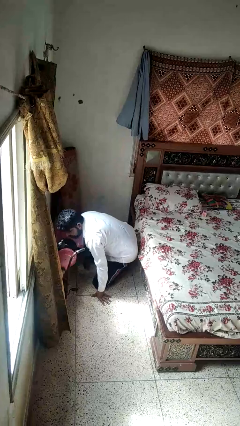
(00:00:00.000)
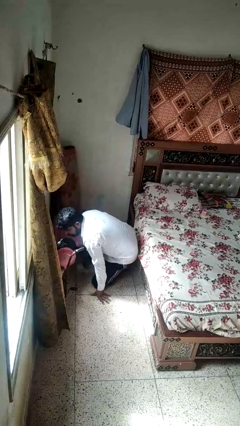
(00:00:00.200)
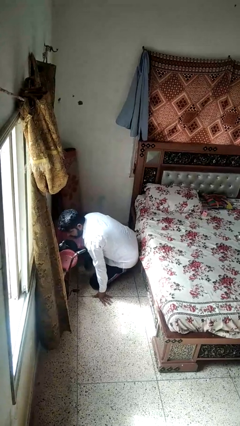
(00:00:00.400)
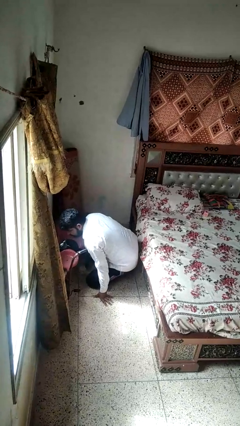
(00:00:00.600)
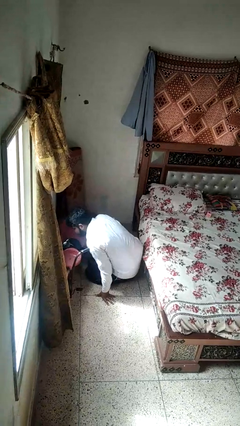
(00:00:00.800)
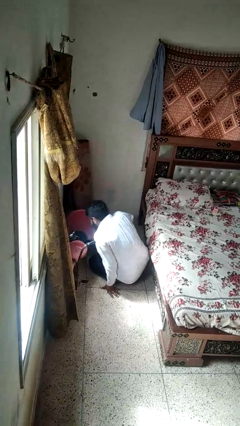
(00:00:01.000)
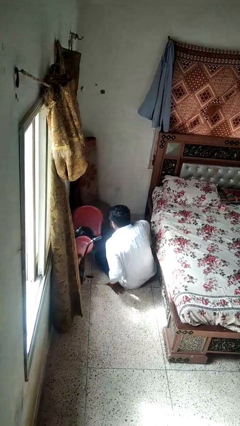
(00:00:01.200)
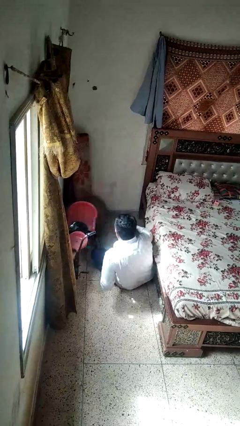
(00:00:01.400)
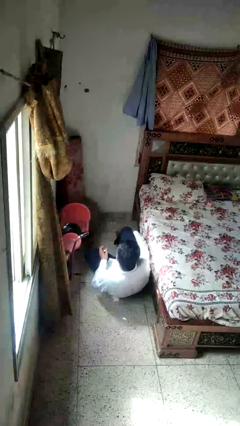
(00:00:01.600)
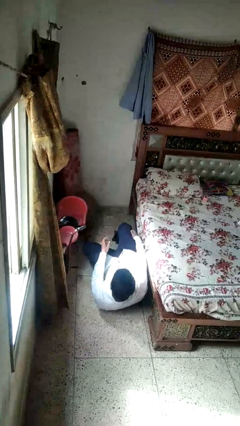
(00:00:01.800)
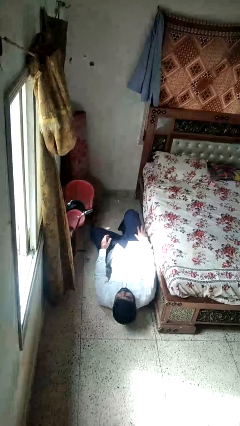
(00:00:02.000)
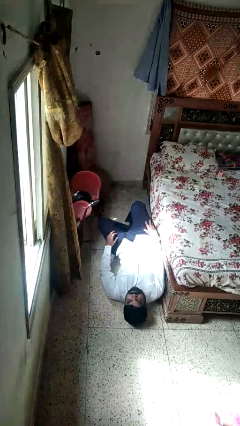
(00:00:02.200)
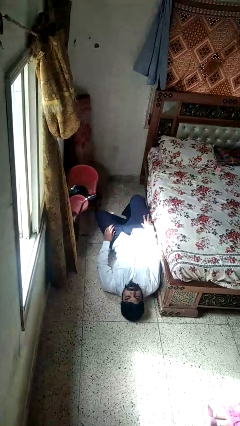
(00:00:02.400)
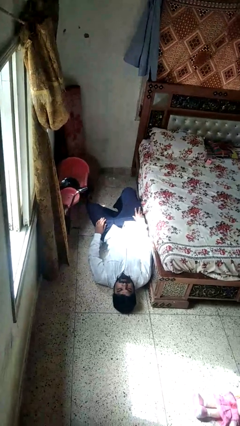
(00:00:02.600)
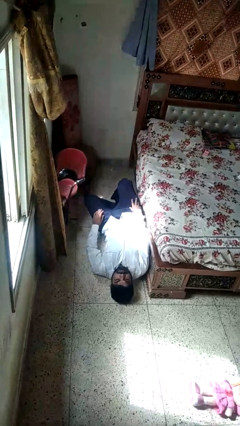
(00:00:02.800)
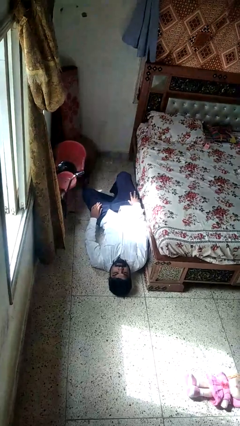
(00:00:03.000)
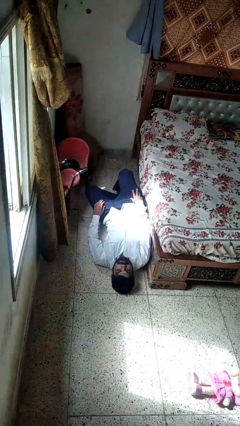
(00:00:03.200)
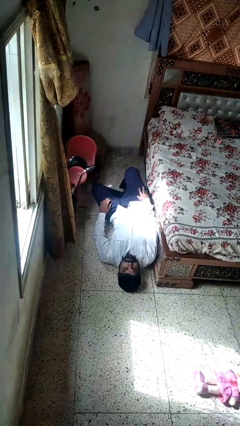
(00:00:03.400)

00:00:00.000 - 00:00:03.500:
person lies down on floor

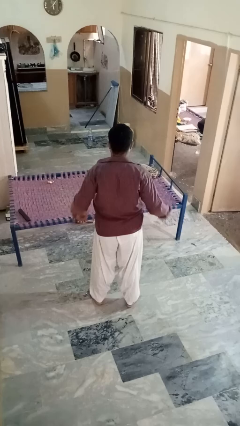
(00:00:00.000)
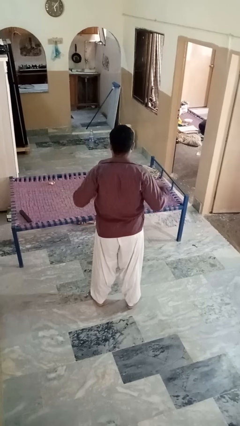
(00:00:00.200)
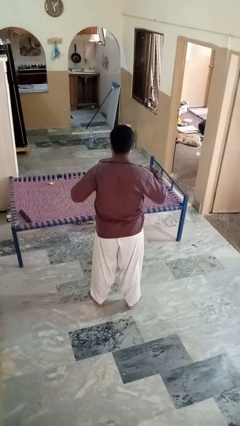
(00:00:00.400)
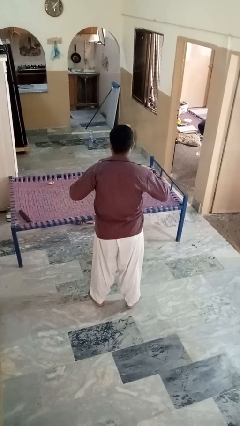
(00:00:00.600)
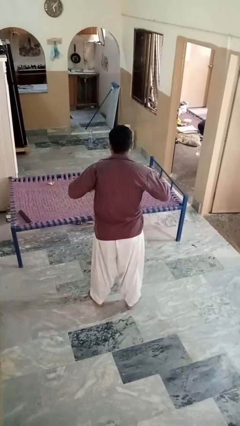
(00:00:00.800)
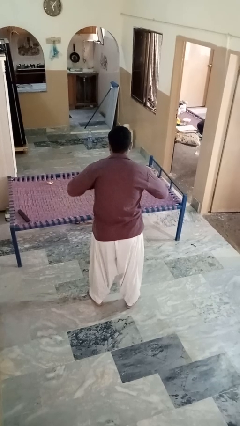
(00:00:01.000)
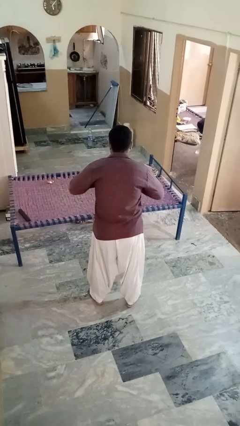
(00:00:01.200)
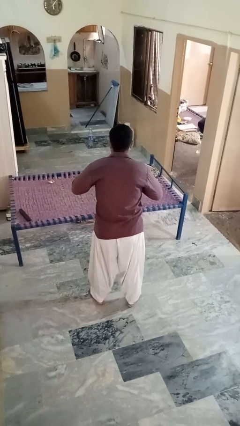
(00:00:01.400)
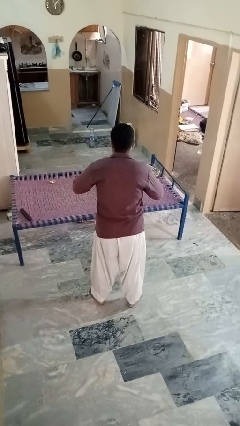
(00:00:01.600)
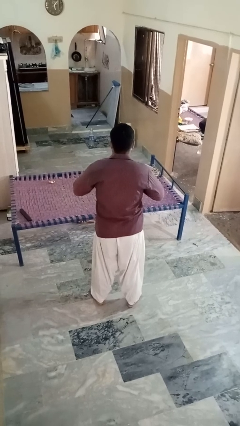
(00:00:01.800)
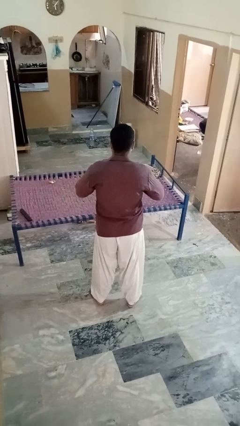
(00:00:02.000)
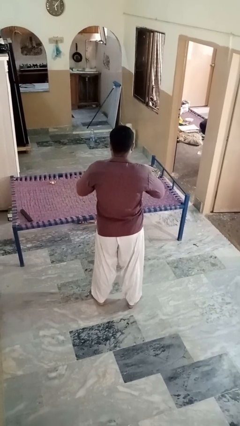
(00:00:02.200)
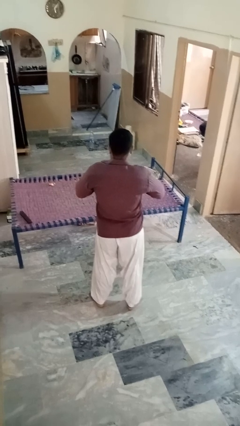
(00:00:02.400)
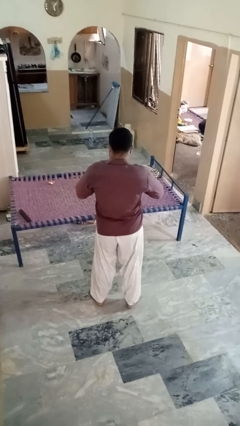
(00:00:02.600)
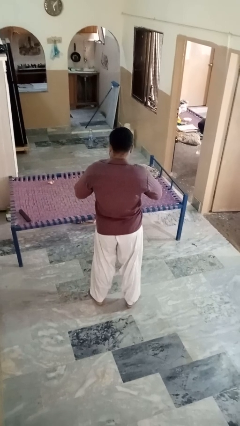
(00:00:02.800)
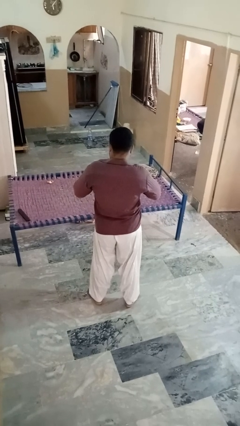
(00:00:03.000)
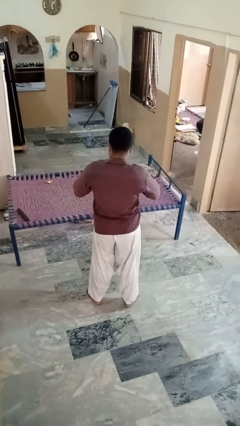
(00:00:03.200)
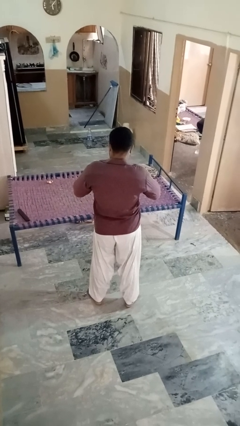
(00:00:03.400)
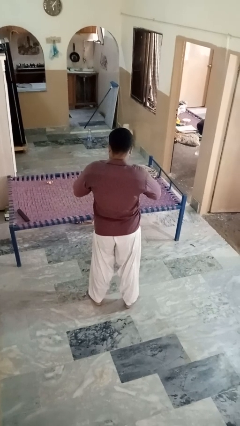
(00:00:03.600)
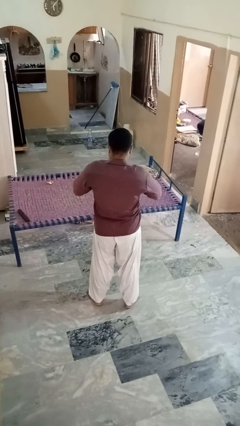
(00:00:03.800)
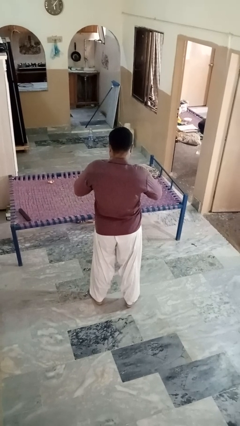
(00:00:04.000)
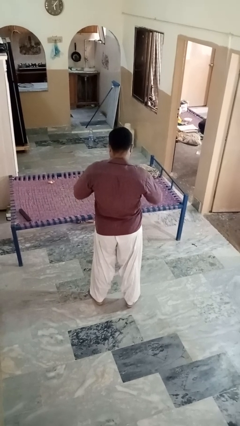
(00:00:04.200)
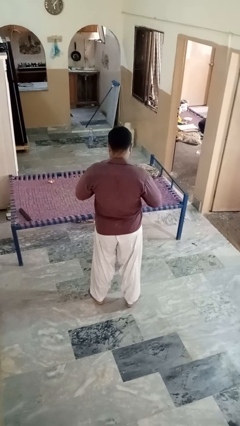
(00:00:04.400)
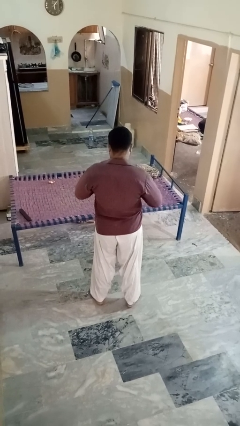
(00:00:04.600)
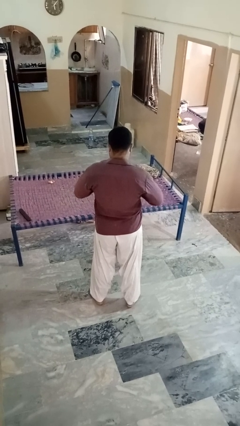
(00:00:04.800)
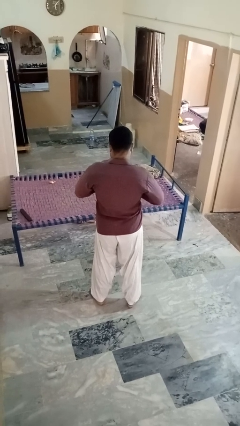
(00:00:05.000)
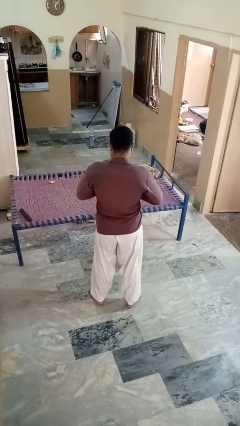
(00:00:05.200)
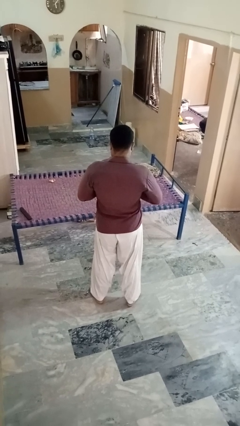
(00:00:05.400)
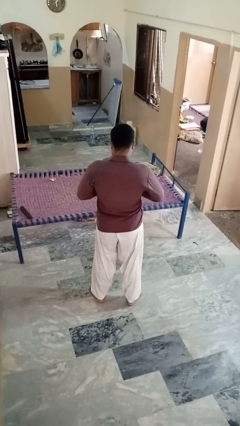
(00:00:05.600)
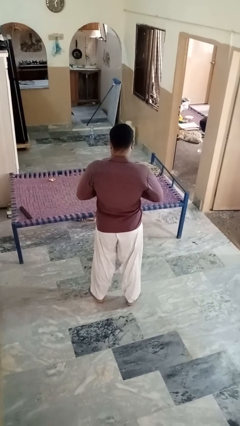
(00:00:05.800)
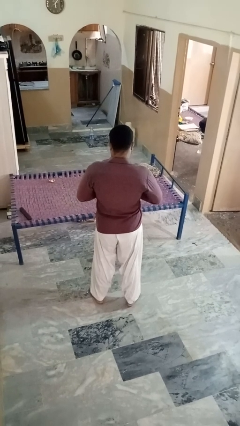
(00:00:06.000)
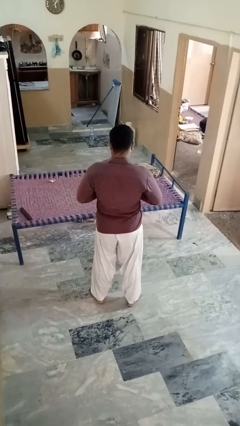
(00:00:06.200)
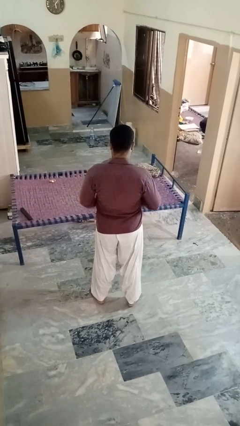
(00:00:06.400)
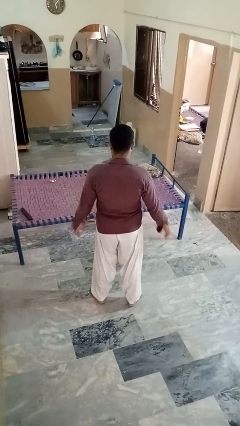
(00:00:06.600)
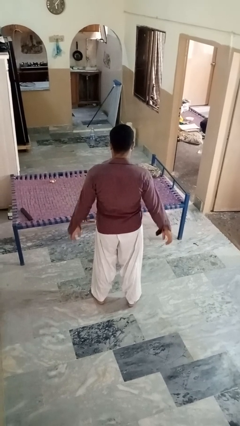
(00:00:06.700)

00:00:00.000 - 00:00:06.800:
person buttons shirt

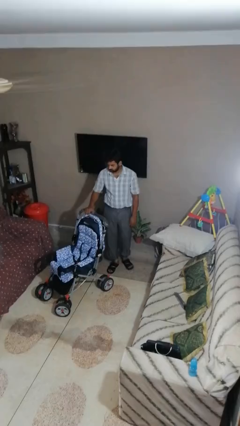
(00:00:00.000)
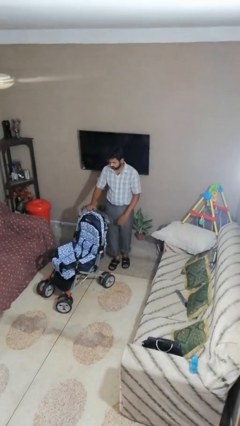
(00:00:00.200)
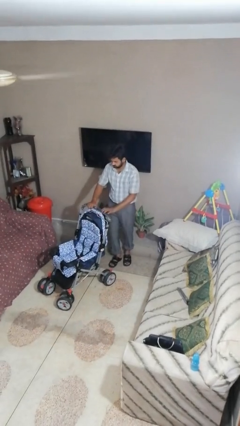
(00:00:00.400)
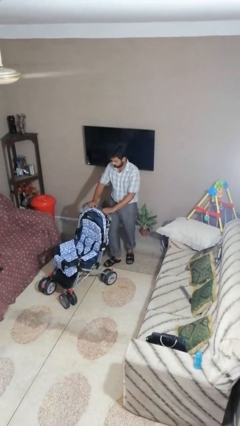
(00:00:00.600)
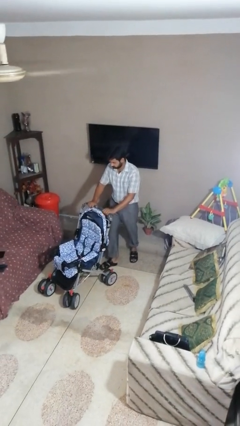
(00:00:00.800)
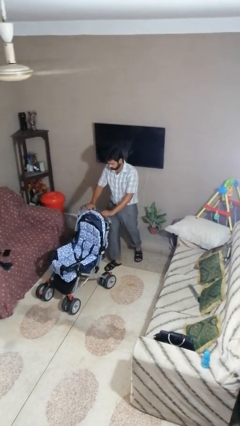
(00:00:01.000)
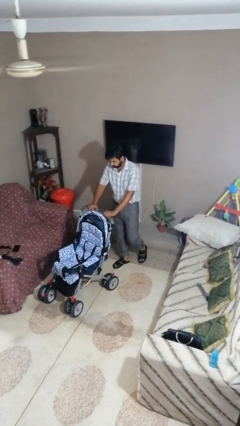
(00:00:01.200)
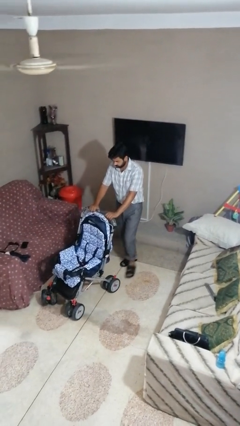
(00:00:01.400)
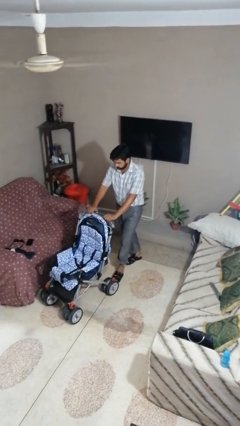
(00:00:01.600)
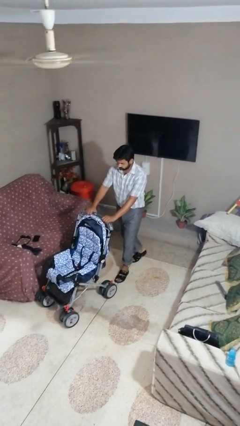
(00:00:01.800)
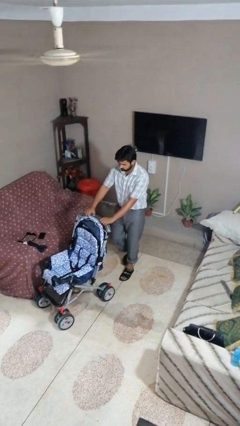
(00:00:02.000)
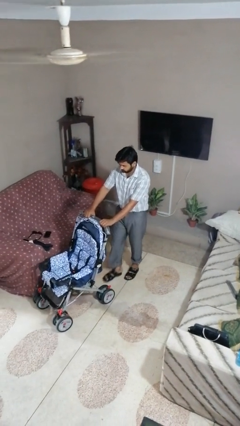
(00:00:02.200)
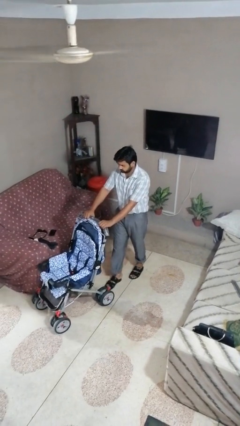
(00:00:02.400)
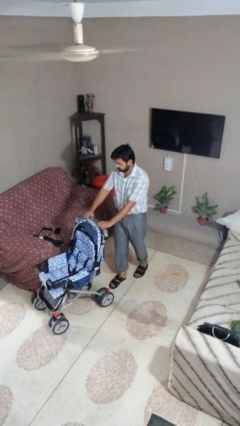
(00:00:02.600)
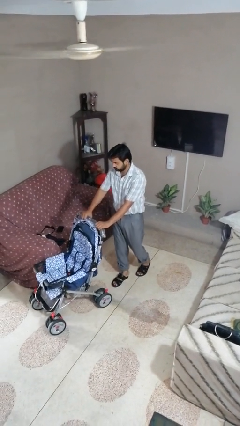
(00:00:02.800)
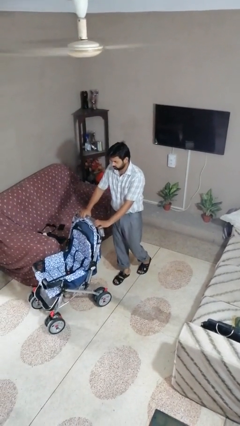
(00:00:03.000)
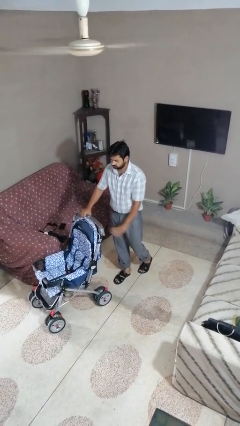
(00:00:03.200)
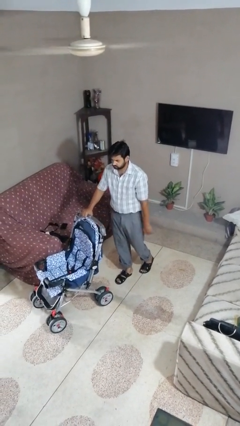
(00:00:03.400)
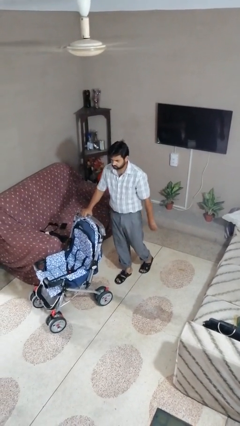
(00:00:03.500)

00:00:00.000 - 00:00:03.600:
person pushes wheeled cart

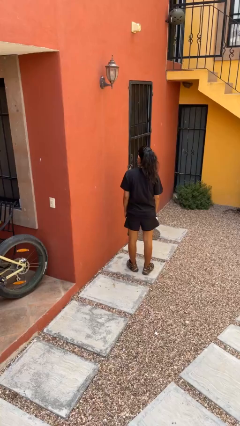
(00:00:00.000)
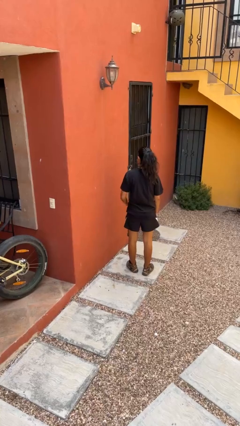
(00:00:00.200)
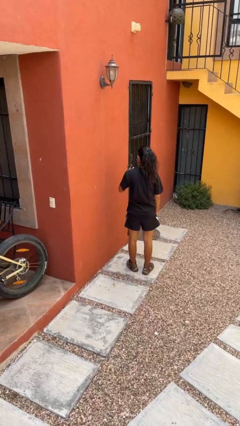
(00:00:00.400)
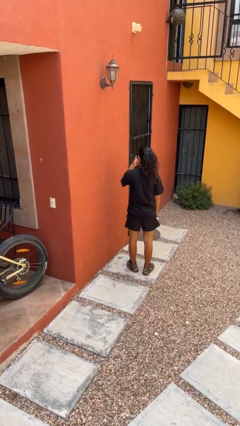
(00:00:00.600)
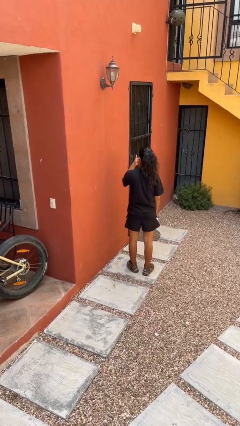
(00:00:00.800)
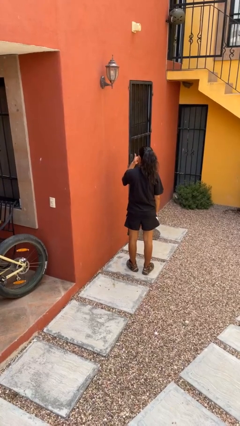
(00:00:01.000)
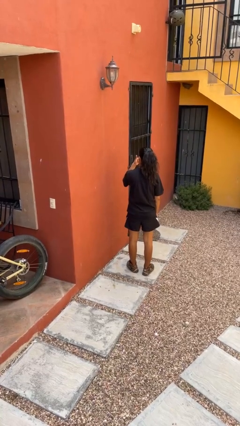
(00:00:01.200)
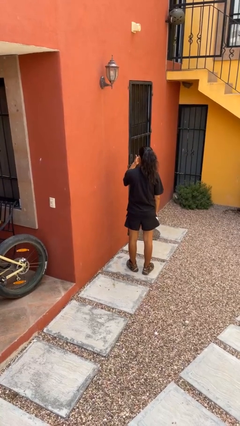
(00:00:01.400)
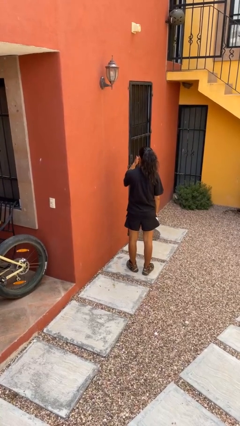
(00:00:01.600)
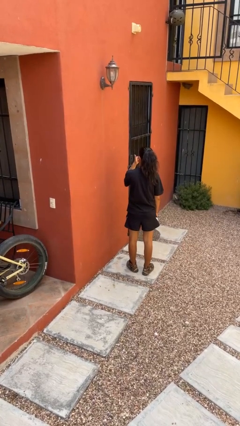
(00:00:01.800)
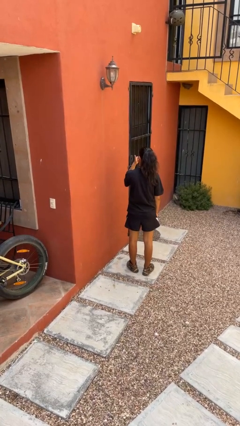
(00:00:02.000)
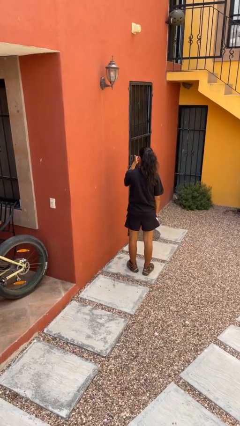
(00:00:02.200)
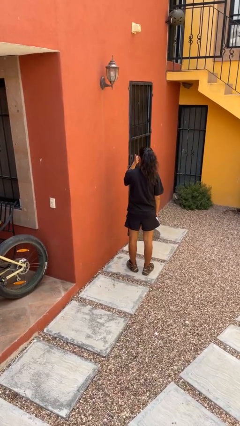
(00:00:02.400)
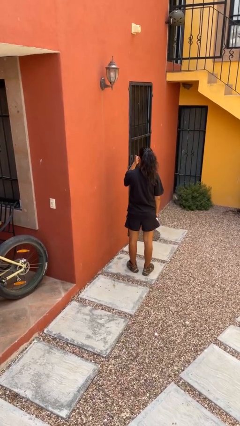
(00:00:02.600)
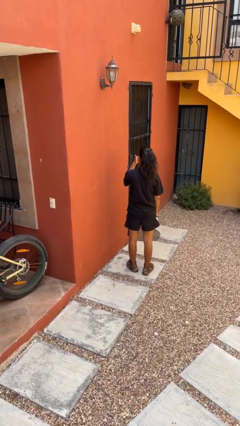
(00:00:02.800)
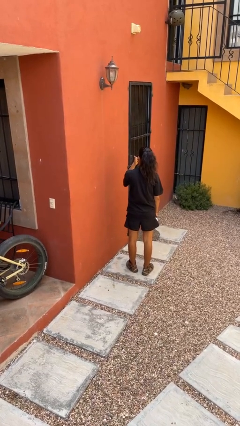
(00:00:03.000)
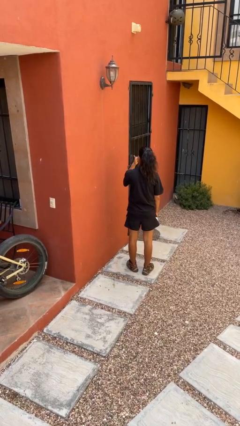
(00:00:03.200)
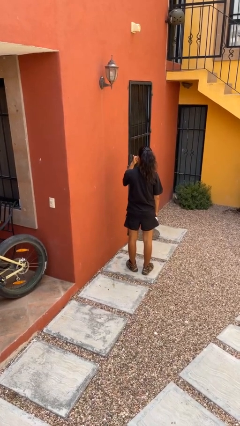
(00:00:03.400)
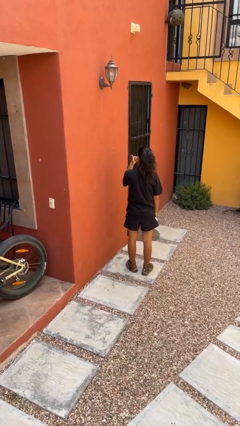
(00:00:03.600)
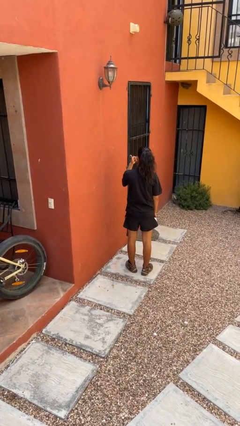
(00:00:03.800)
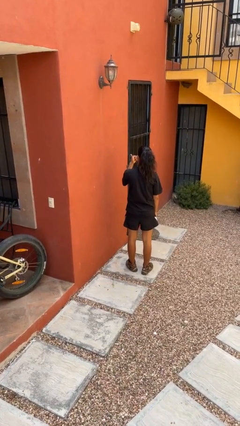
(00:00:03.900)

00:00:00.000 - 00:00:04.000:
person gestures thumbs up
